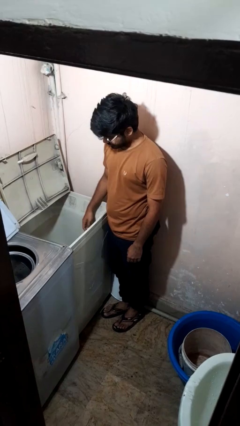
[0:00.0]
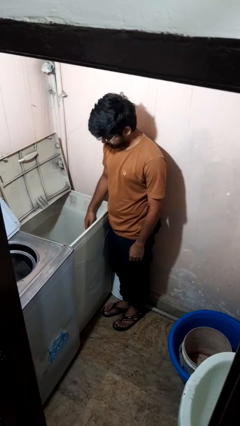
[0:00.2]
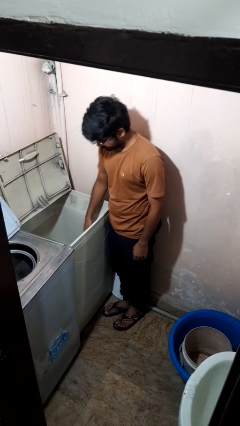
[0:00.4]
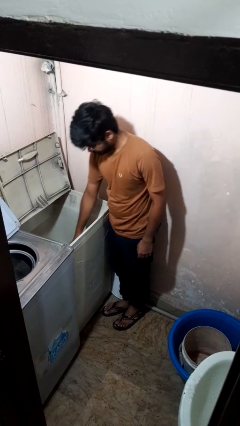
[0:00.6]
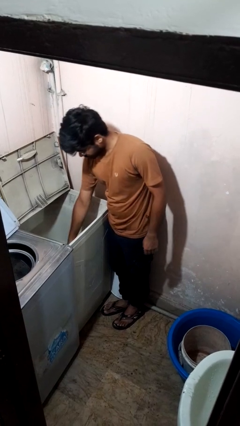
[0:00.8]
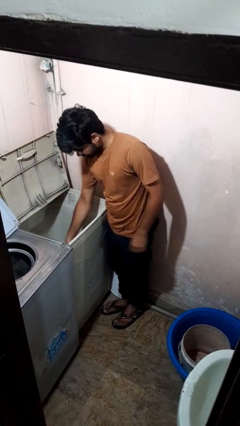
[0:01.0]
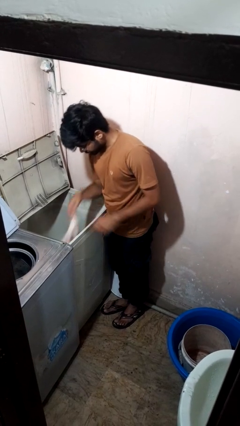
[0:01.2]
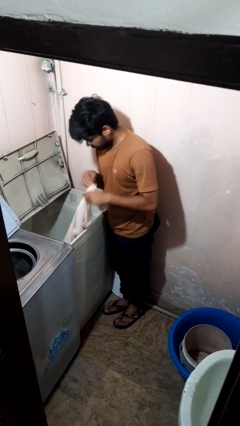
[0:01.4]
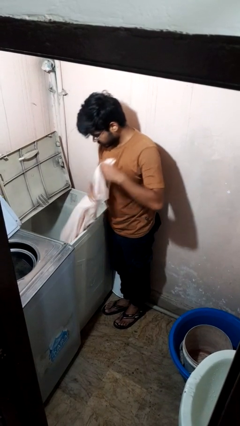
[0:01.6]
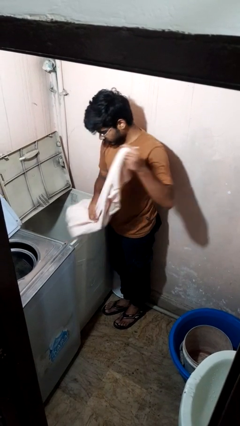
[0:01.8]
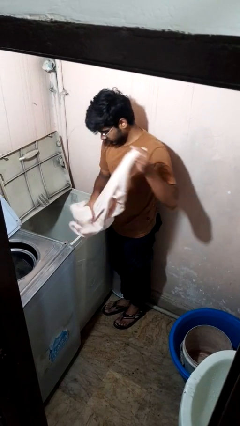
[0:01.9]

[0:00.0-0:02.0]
person unloads clotheswasher

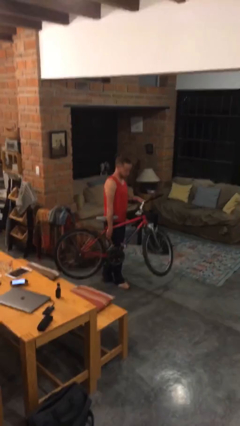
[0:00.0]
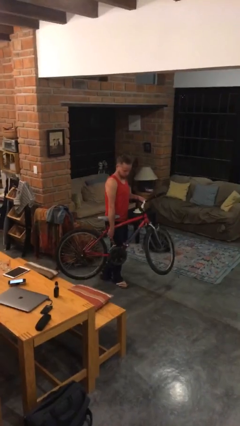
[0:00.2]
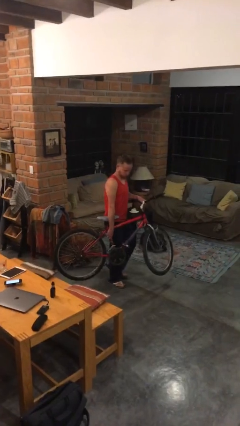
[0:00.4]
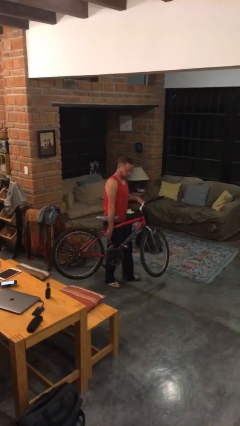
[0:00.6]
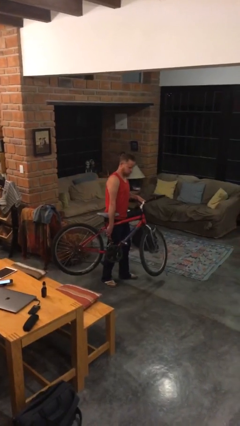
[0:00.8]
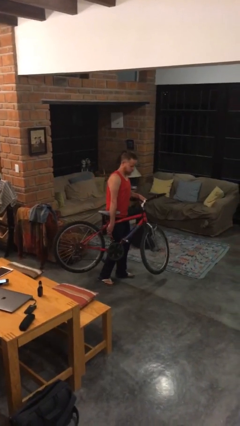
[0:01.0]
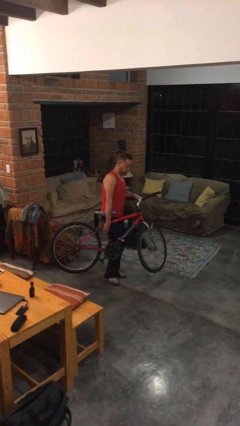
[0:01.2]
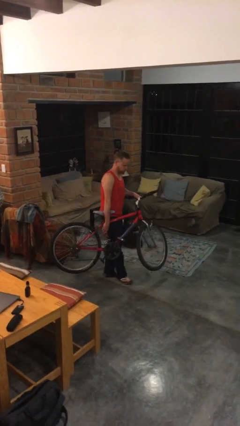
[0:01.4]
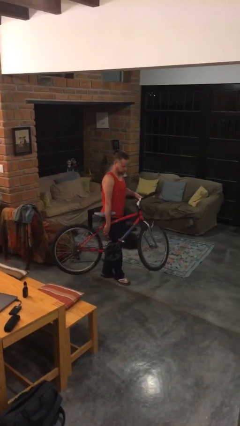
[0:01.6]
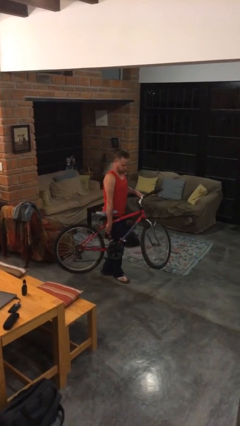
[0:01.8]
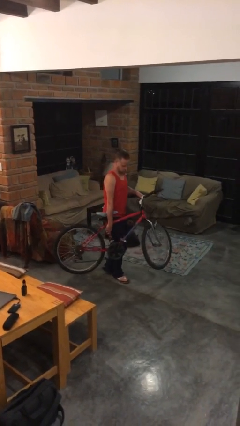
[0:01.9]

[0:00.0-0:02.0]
person carries bicycle

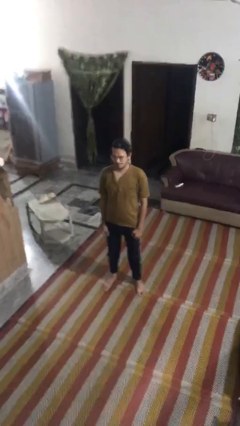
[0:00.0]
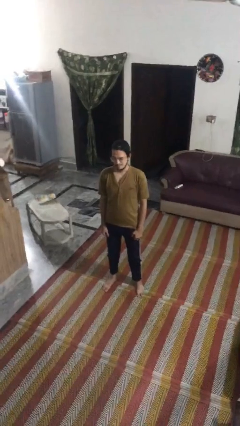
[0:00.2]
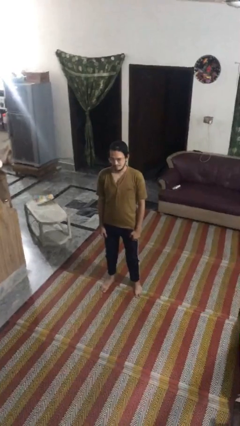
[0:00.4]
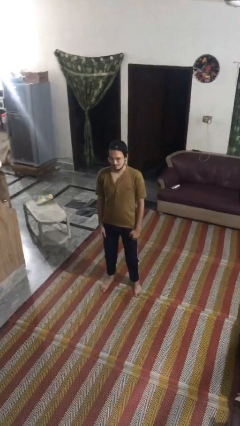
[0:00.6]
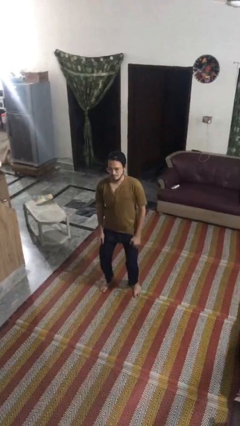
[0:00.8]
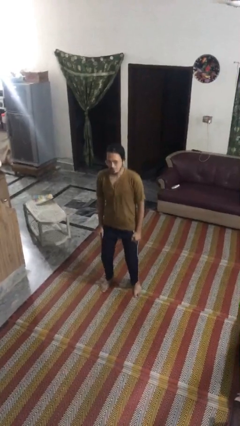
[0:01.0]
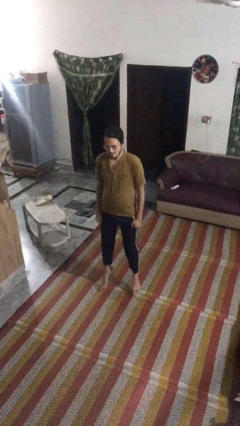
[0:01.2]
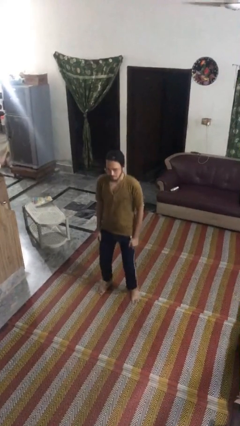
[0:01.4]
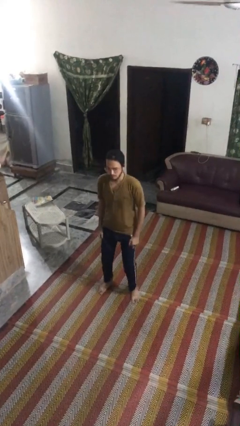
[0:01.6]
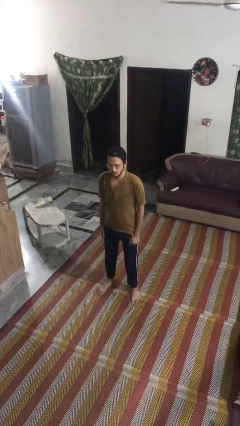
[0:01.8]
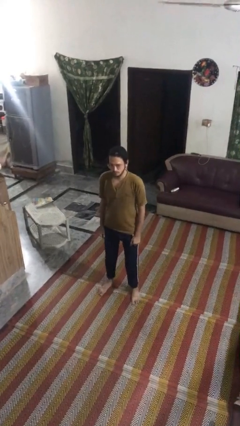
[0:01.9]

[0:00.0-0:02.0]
person jumps

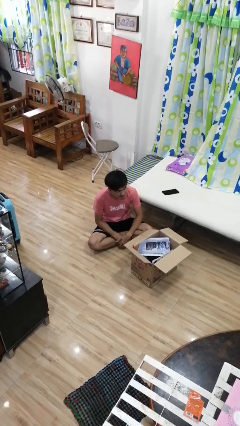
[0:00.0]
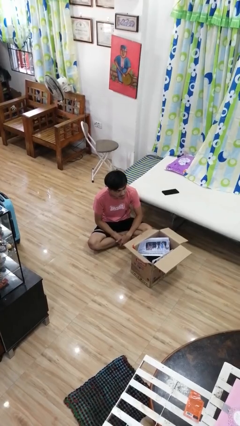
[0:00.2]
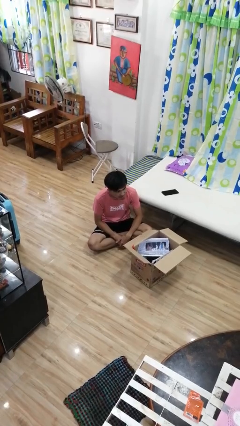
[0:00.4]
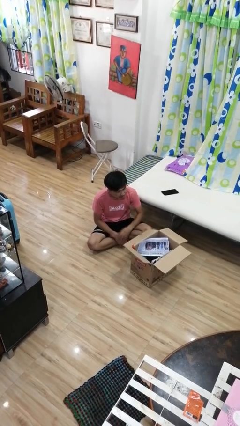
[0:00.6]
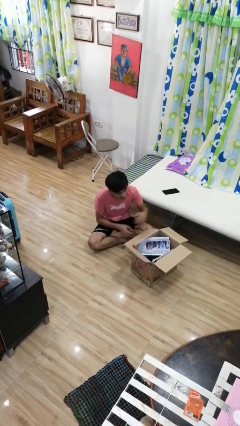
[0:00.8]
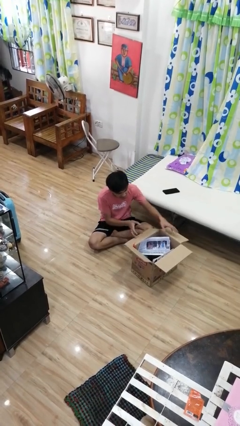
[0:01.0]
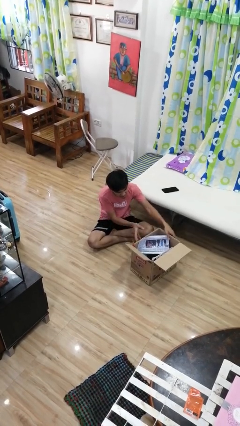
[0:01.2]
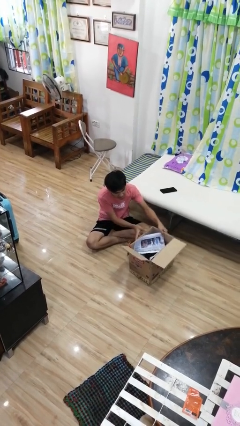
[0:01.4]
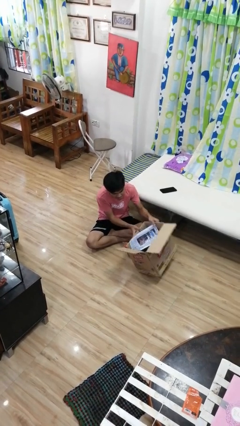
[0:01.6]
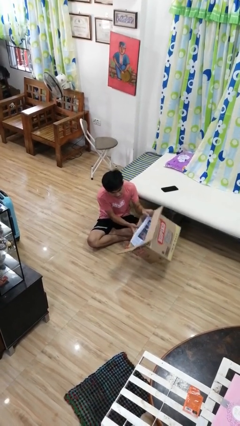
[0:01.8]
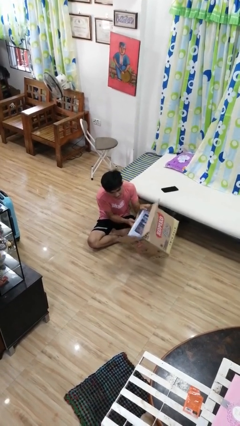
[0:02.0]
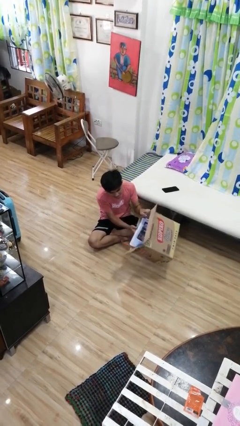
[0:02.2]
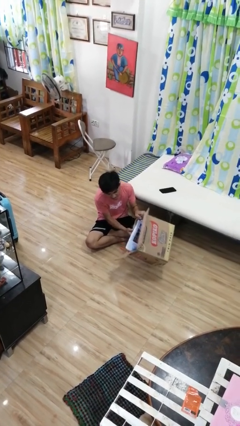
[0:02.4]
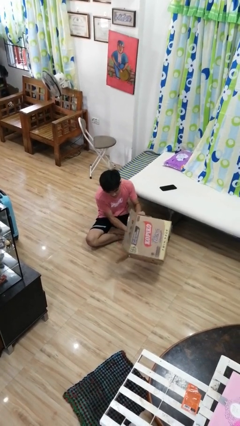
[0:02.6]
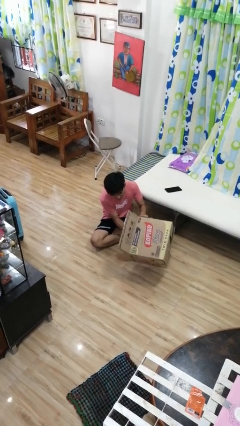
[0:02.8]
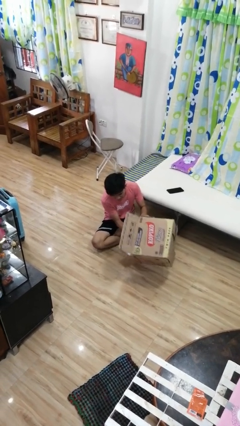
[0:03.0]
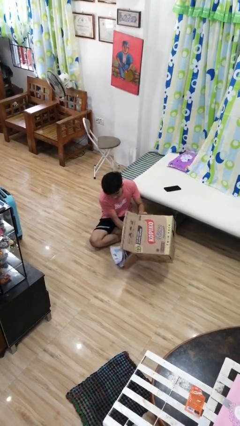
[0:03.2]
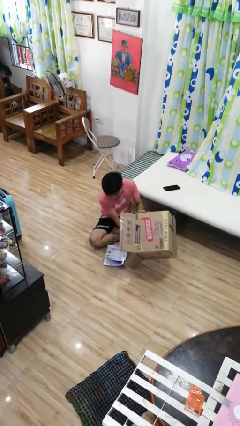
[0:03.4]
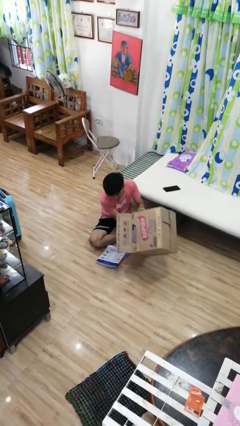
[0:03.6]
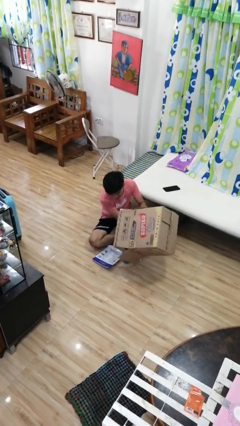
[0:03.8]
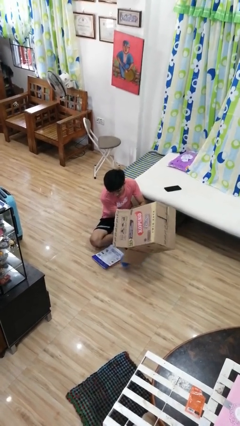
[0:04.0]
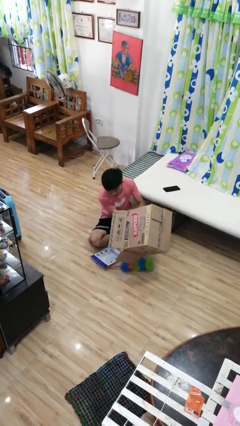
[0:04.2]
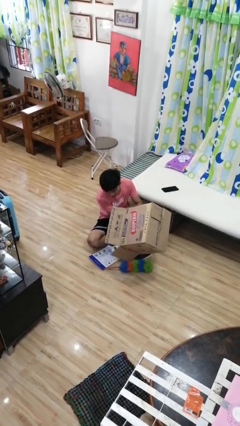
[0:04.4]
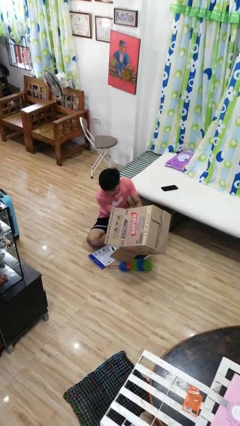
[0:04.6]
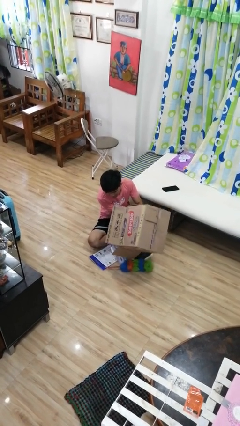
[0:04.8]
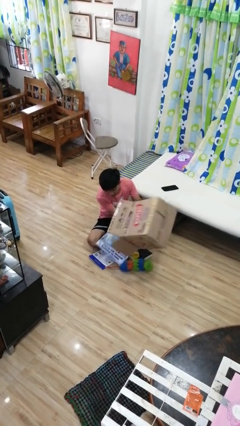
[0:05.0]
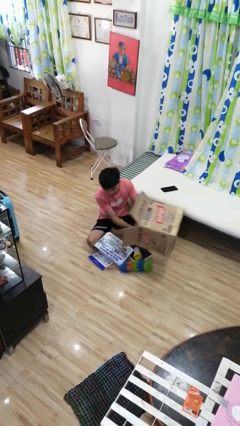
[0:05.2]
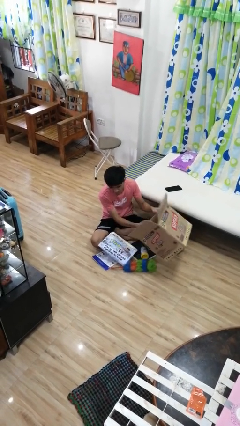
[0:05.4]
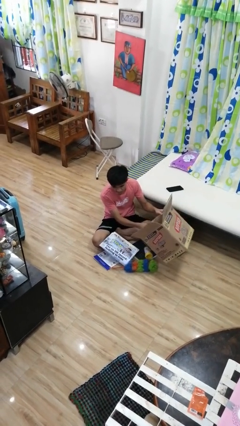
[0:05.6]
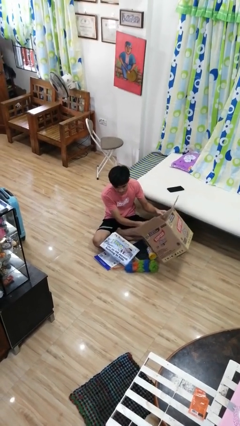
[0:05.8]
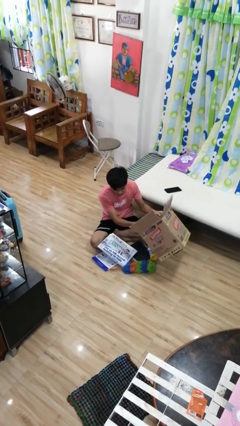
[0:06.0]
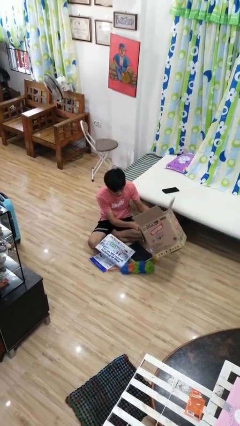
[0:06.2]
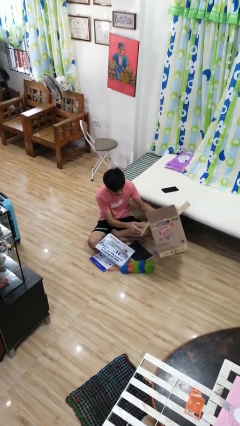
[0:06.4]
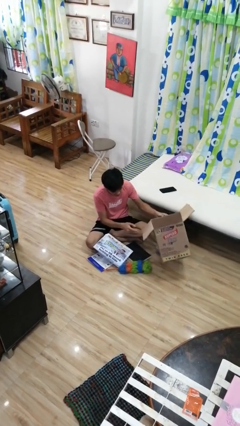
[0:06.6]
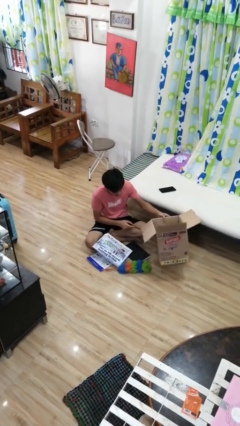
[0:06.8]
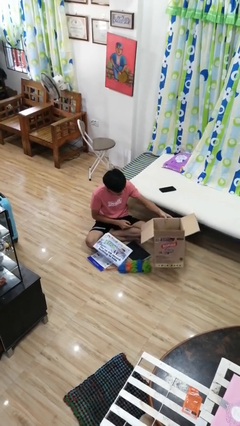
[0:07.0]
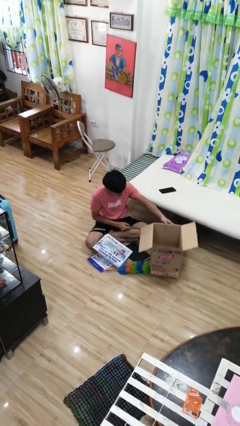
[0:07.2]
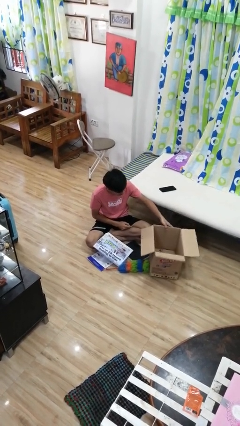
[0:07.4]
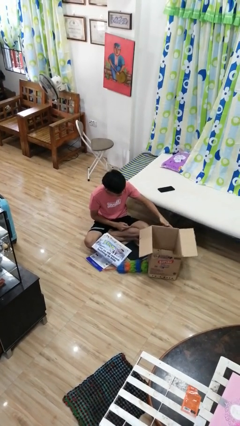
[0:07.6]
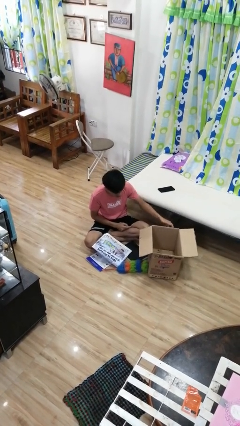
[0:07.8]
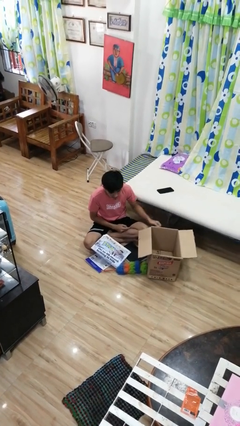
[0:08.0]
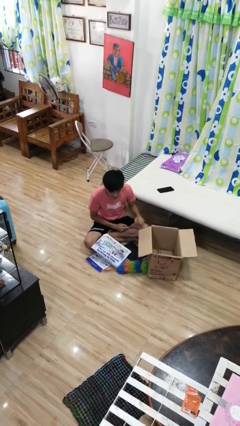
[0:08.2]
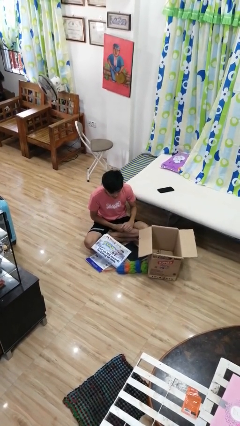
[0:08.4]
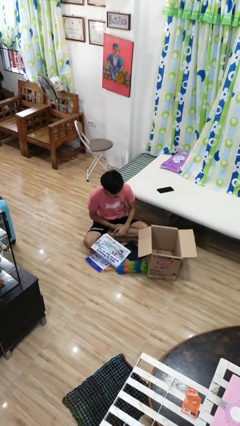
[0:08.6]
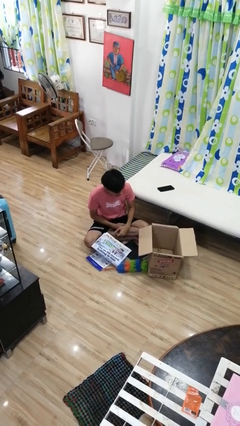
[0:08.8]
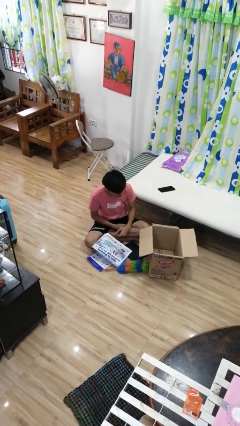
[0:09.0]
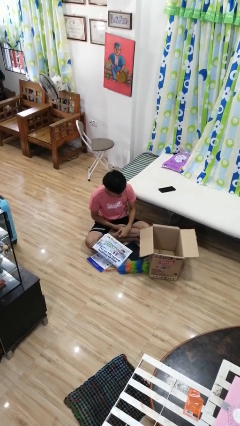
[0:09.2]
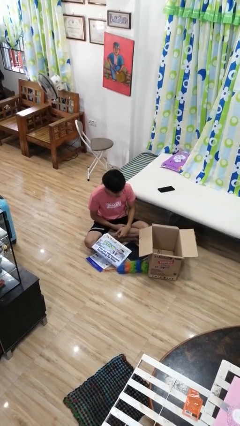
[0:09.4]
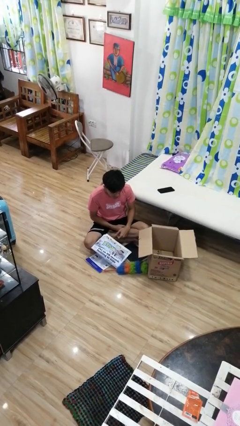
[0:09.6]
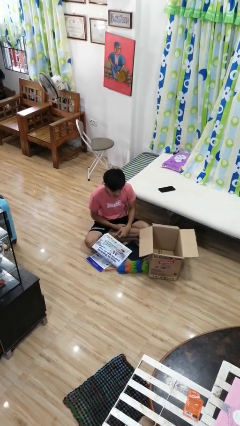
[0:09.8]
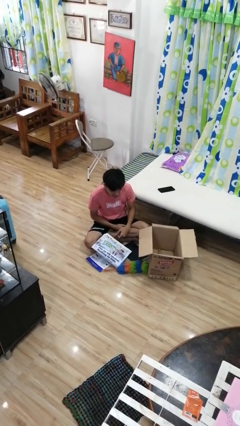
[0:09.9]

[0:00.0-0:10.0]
person unloads box onto floor

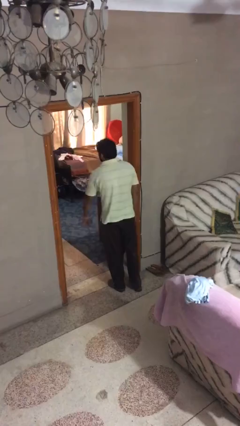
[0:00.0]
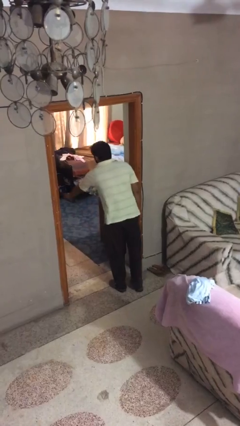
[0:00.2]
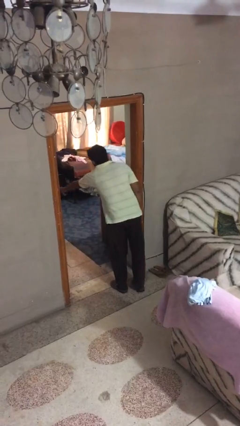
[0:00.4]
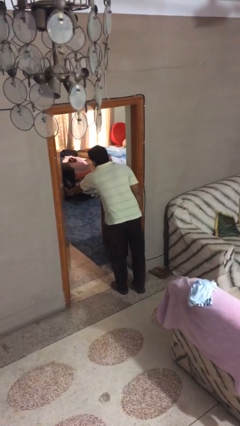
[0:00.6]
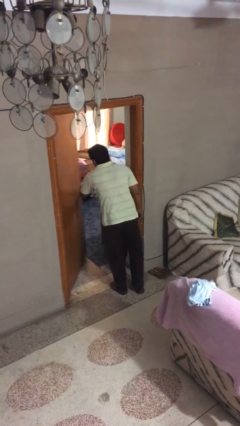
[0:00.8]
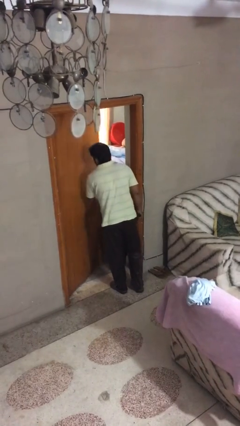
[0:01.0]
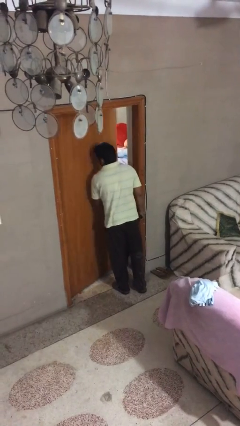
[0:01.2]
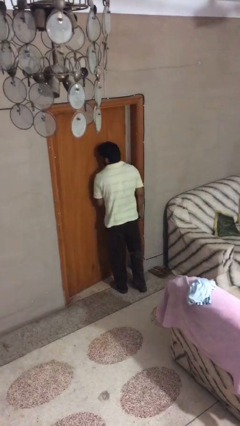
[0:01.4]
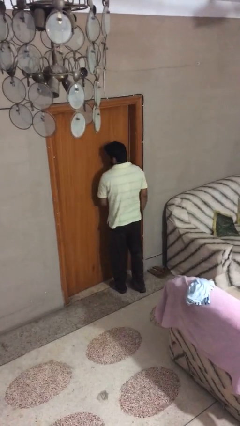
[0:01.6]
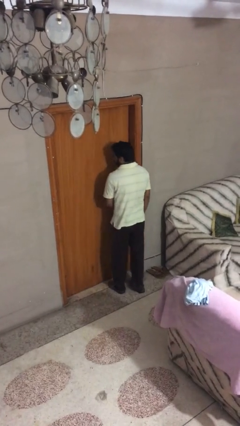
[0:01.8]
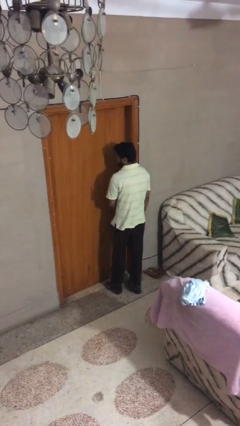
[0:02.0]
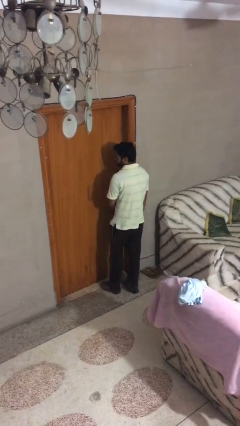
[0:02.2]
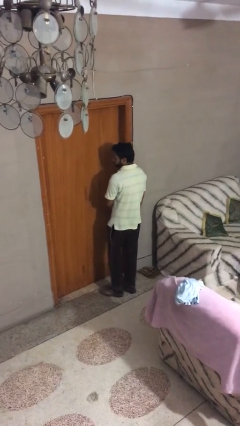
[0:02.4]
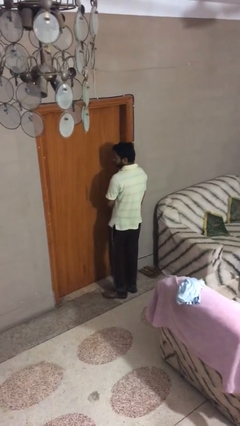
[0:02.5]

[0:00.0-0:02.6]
person closes facility door
